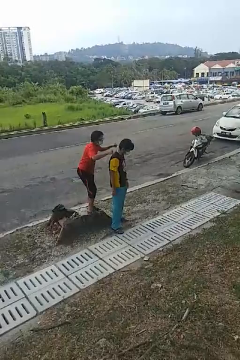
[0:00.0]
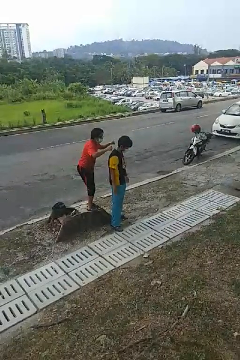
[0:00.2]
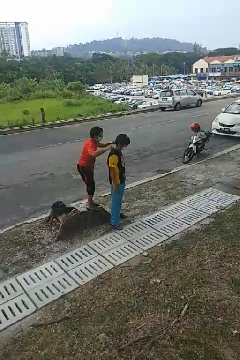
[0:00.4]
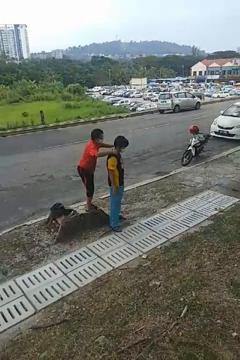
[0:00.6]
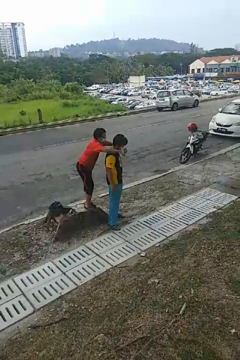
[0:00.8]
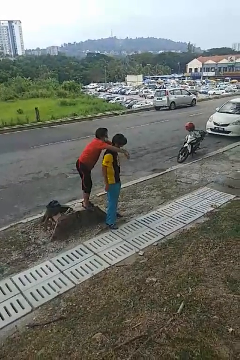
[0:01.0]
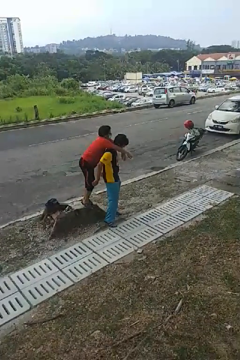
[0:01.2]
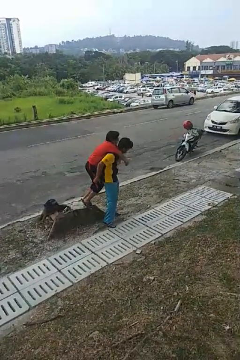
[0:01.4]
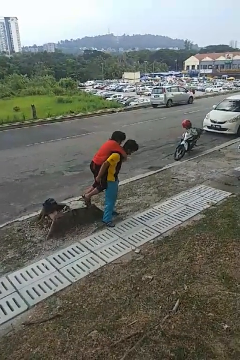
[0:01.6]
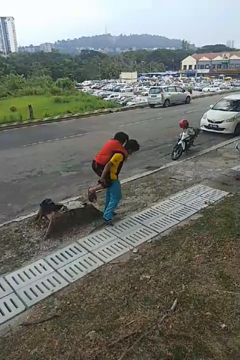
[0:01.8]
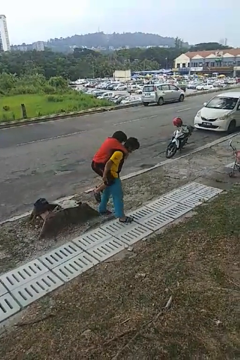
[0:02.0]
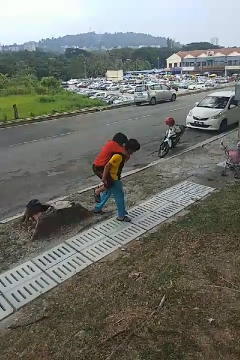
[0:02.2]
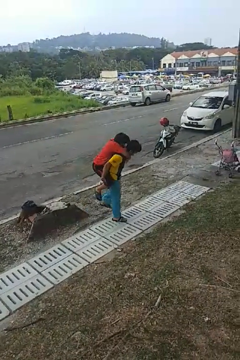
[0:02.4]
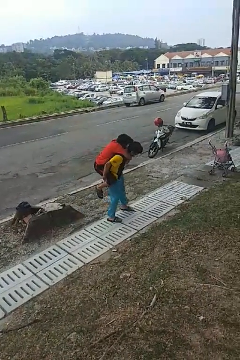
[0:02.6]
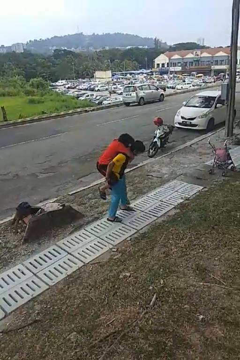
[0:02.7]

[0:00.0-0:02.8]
person carries person over shoulder

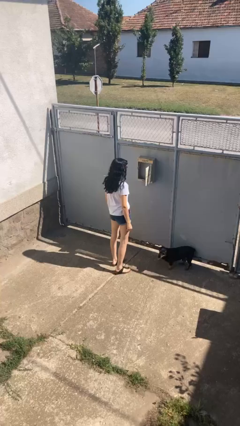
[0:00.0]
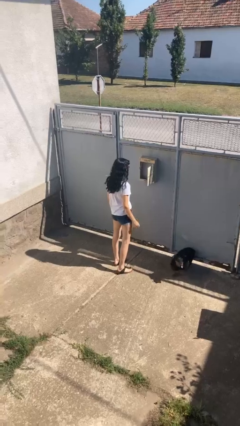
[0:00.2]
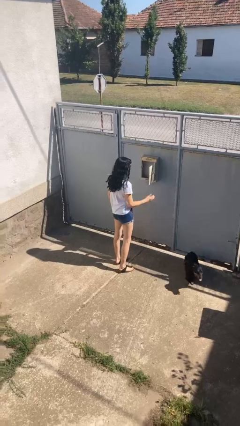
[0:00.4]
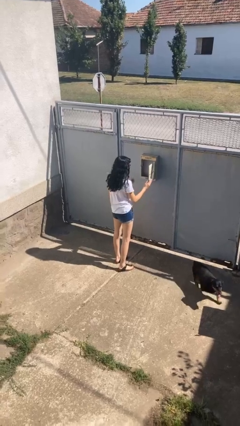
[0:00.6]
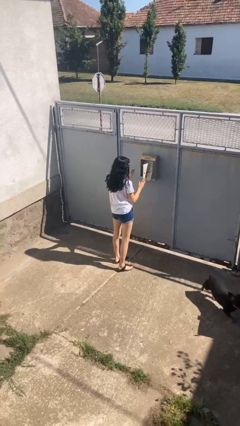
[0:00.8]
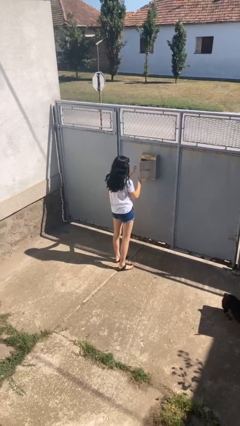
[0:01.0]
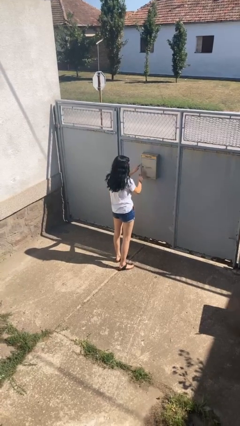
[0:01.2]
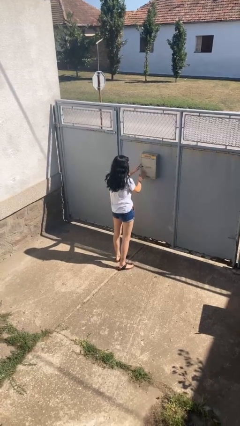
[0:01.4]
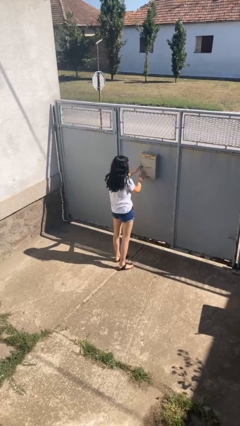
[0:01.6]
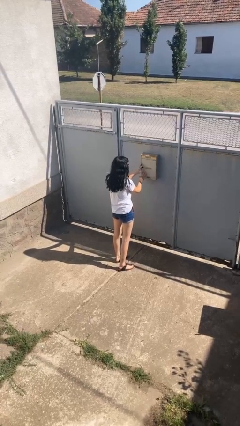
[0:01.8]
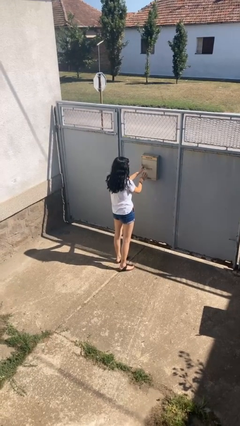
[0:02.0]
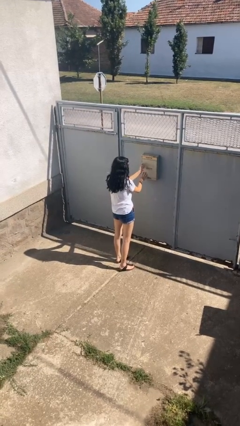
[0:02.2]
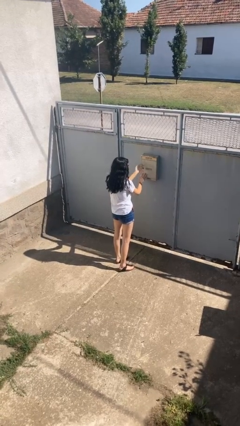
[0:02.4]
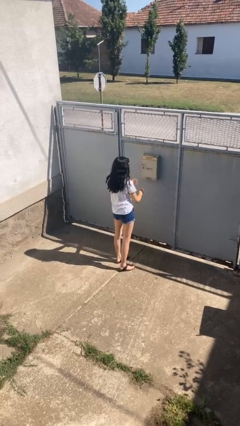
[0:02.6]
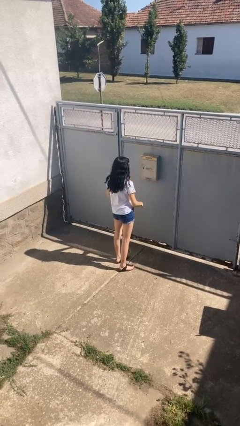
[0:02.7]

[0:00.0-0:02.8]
person closes mailbox

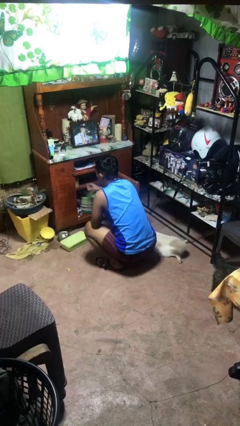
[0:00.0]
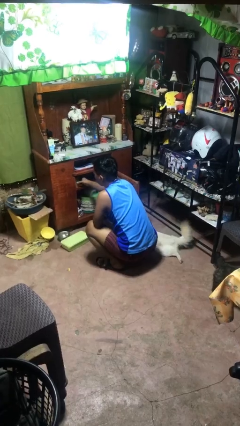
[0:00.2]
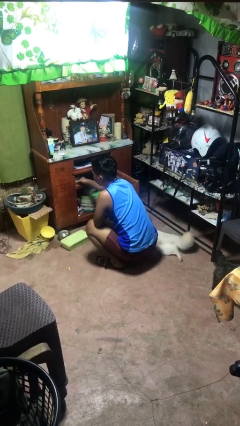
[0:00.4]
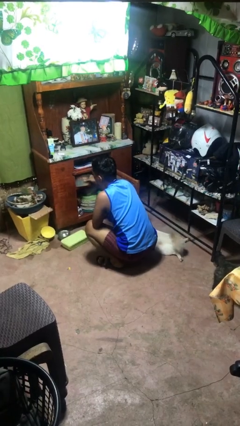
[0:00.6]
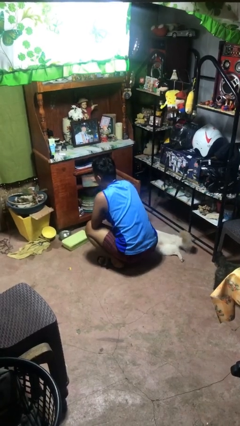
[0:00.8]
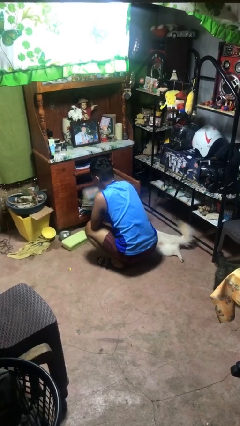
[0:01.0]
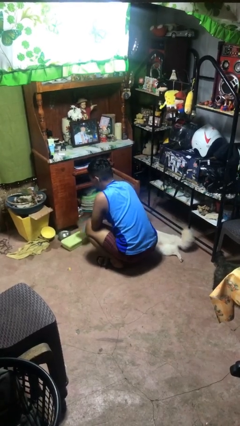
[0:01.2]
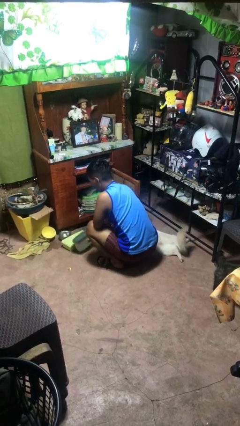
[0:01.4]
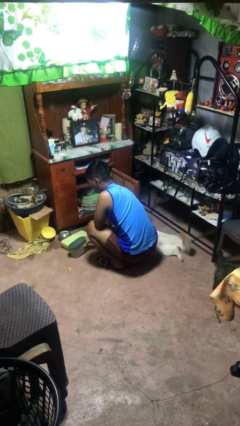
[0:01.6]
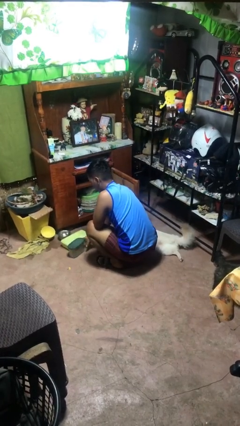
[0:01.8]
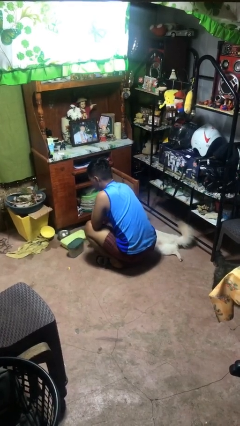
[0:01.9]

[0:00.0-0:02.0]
person takes object from cabinet

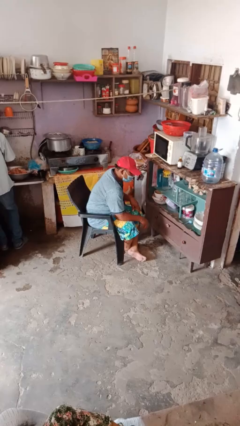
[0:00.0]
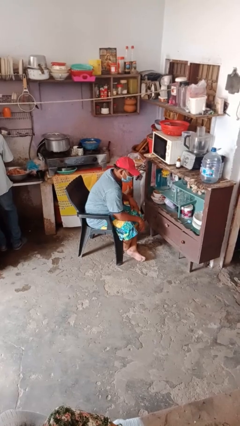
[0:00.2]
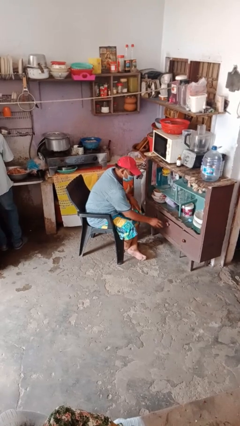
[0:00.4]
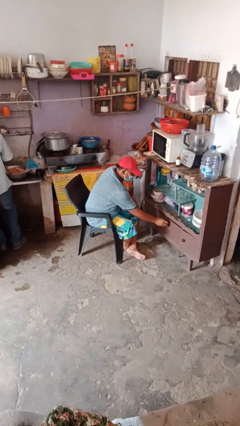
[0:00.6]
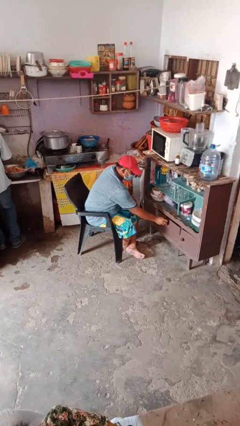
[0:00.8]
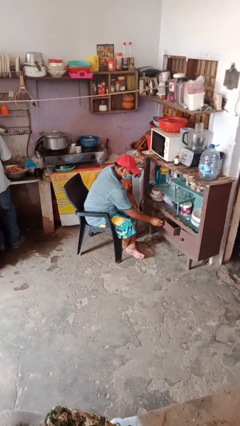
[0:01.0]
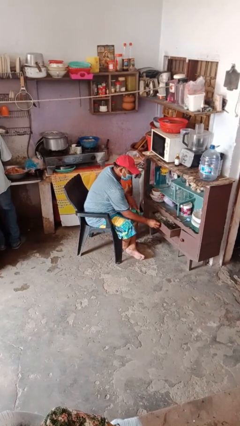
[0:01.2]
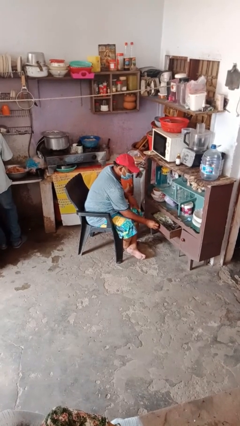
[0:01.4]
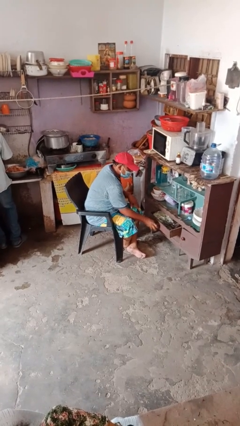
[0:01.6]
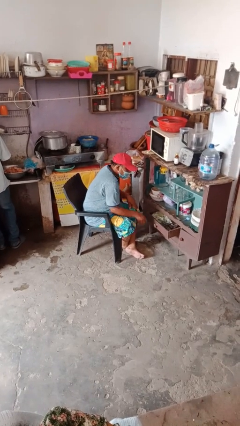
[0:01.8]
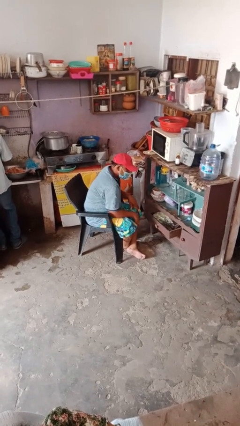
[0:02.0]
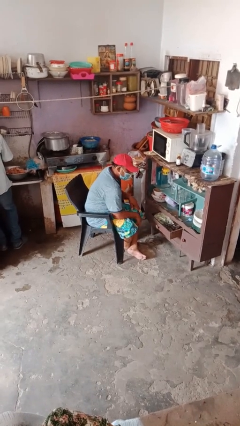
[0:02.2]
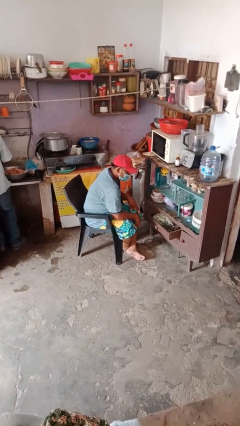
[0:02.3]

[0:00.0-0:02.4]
person opens dresser drawer

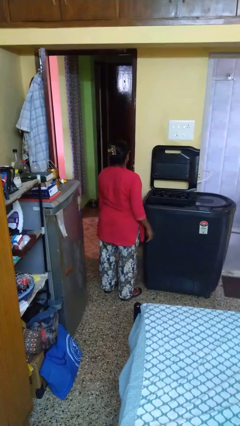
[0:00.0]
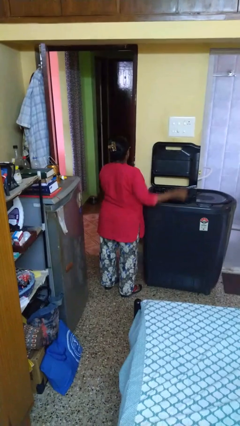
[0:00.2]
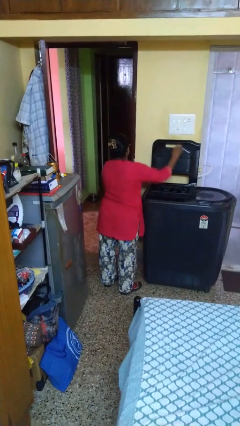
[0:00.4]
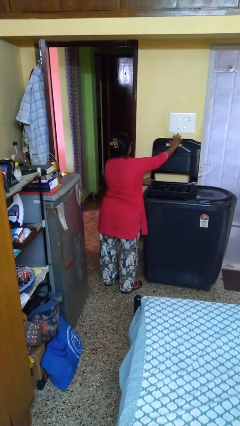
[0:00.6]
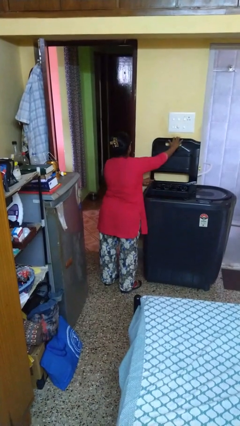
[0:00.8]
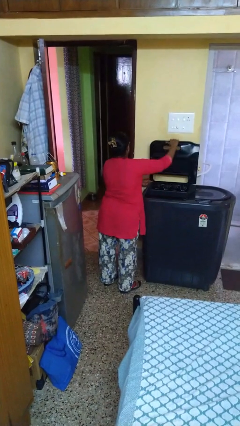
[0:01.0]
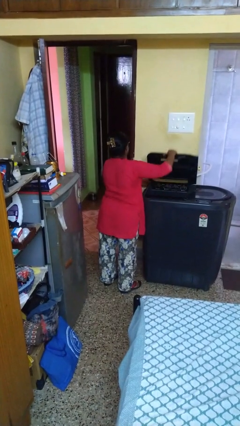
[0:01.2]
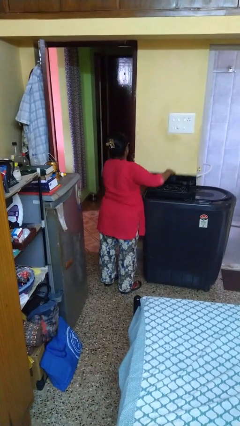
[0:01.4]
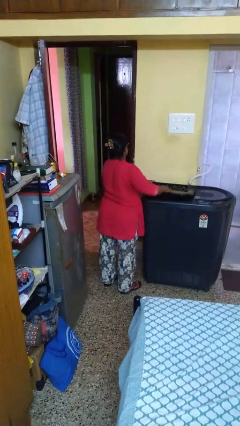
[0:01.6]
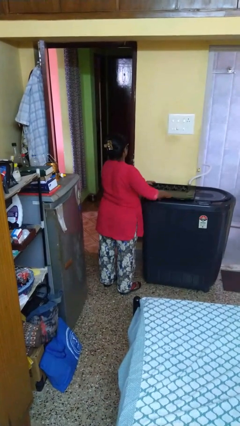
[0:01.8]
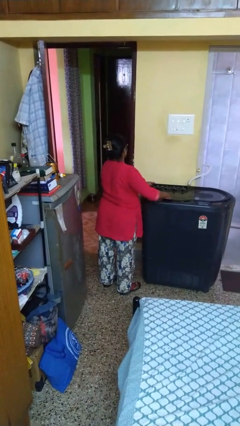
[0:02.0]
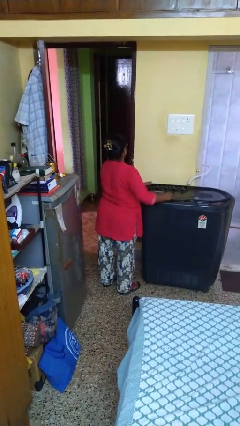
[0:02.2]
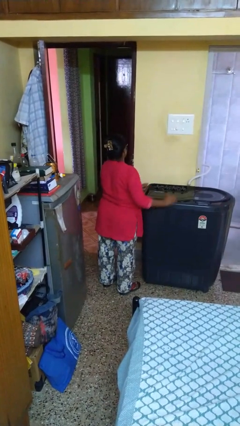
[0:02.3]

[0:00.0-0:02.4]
person closes clothes washer

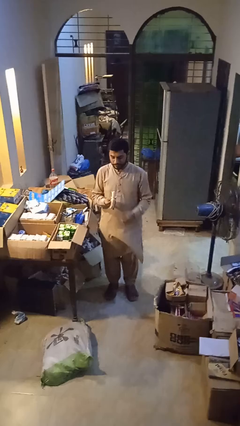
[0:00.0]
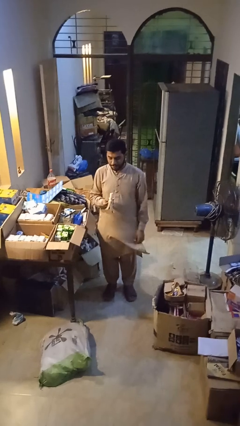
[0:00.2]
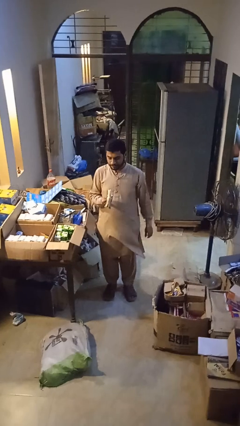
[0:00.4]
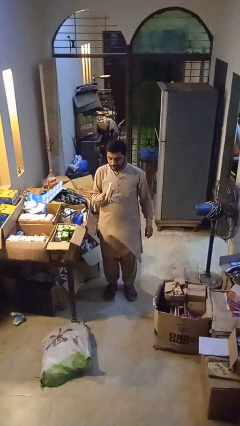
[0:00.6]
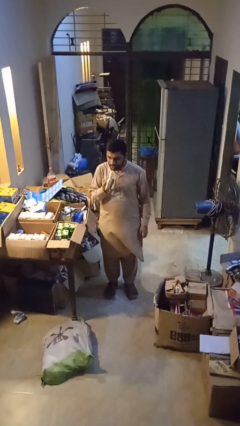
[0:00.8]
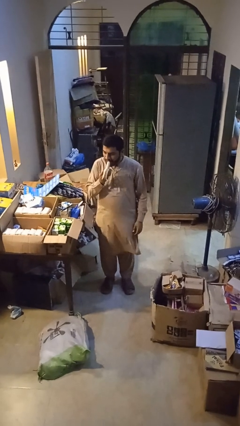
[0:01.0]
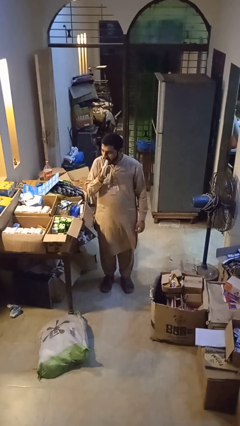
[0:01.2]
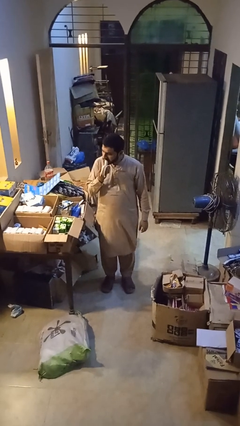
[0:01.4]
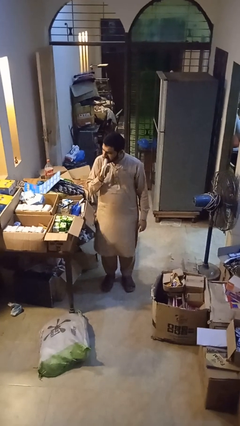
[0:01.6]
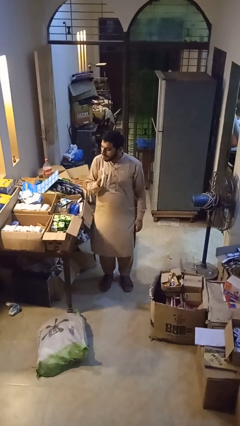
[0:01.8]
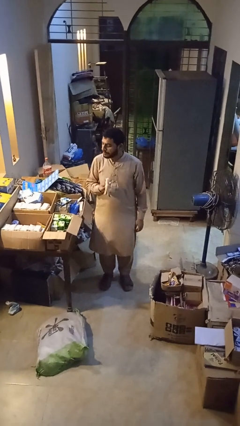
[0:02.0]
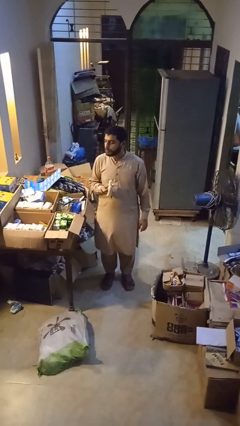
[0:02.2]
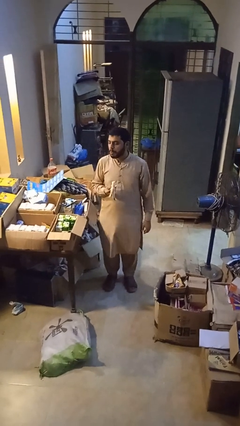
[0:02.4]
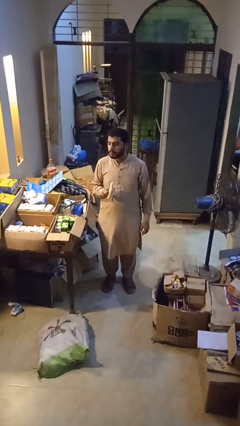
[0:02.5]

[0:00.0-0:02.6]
person eats banana

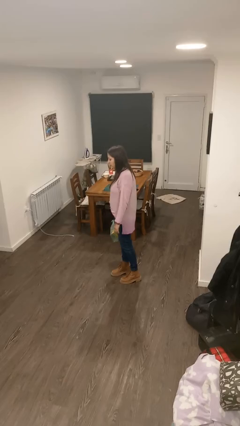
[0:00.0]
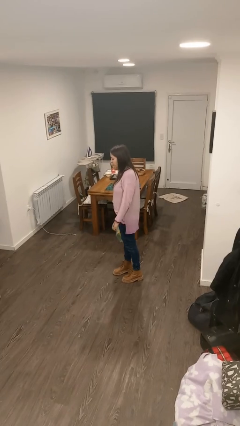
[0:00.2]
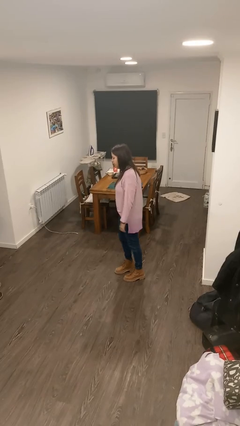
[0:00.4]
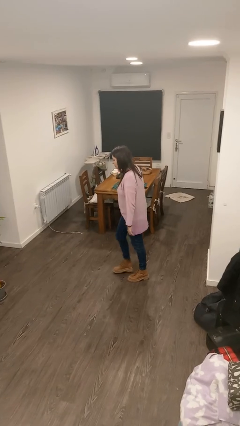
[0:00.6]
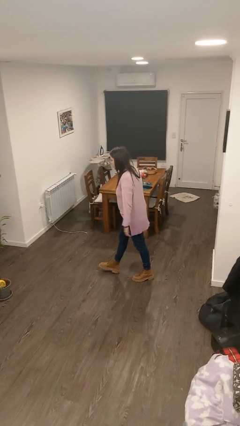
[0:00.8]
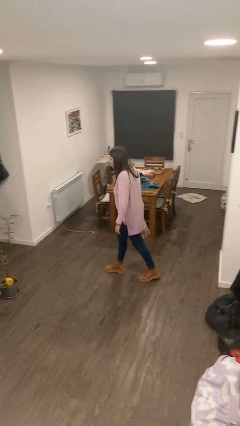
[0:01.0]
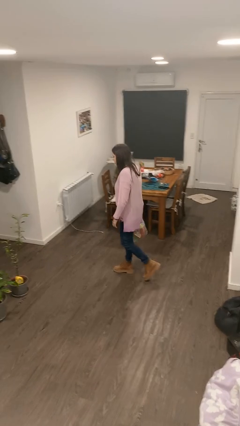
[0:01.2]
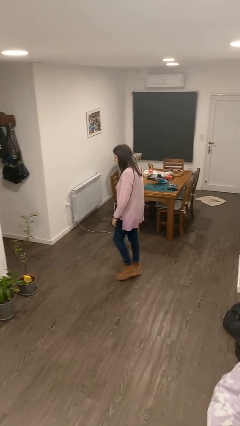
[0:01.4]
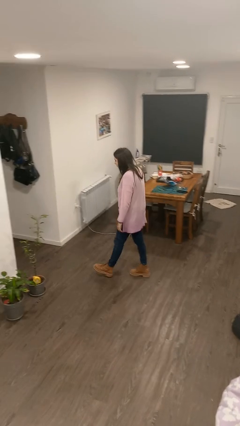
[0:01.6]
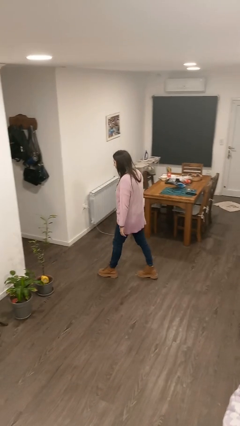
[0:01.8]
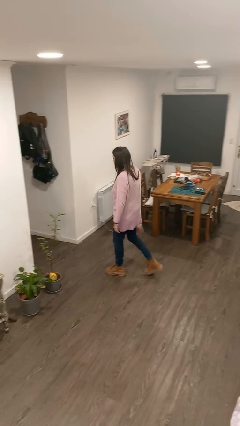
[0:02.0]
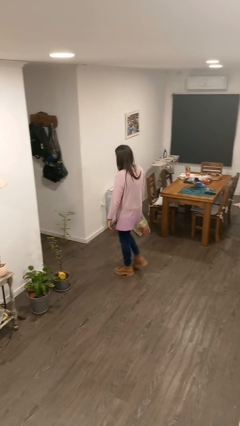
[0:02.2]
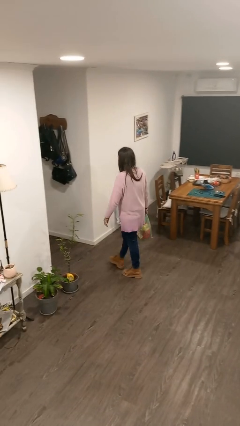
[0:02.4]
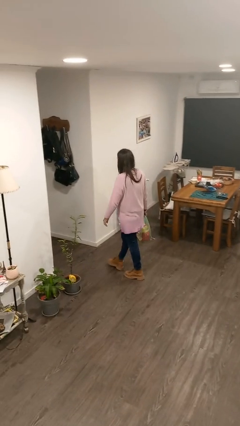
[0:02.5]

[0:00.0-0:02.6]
person carries groceries
